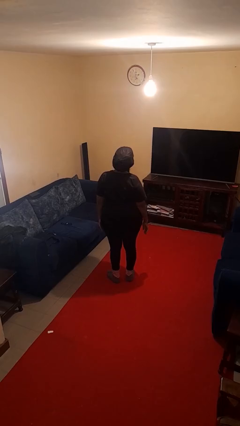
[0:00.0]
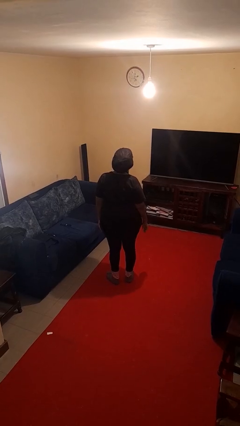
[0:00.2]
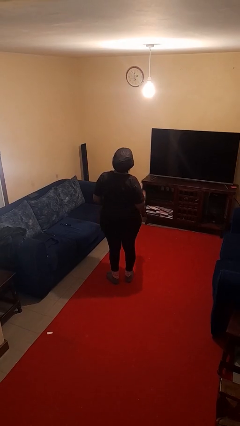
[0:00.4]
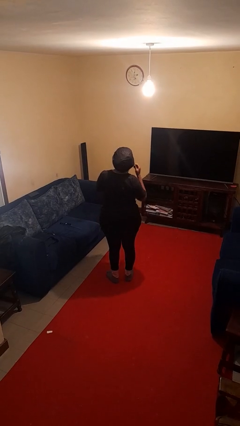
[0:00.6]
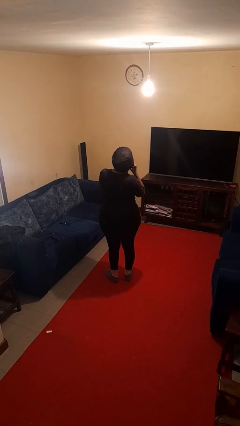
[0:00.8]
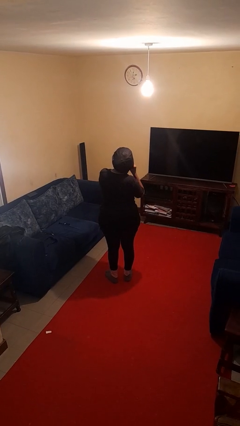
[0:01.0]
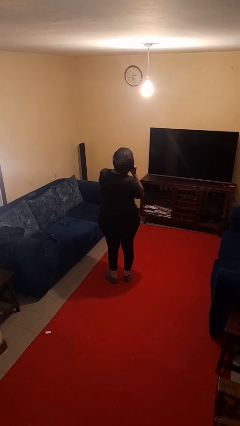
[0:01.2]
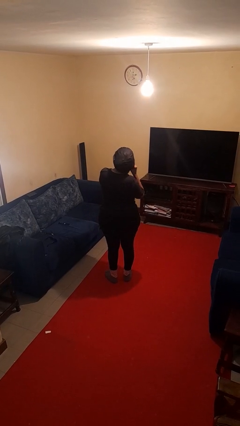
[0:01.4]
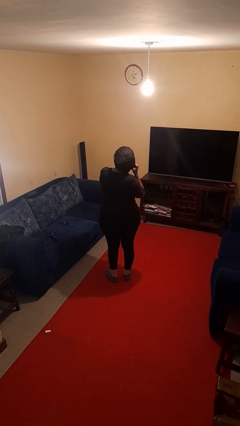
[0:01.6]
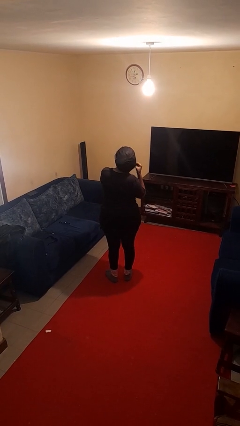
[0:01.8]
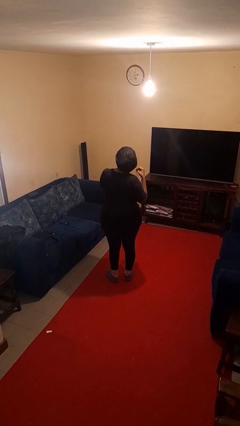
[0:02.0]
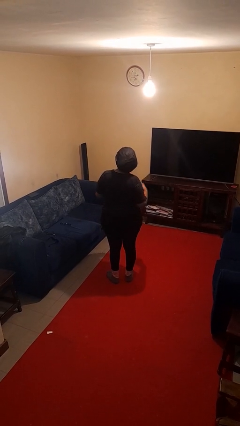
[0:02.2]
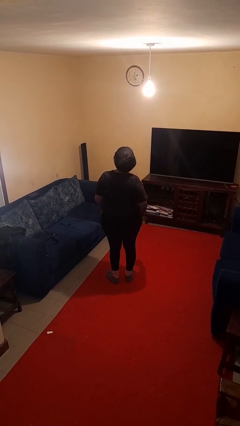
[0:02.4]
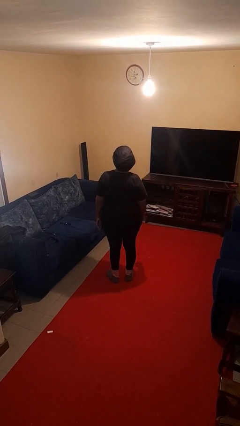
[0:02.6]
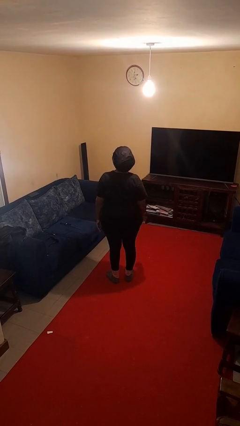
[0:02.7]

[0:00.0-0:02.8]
person takes off earrings

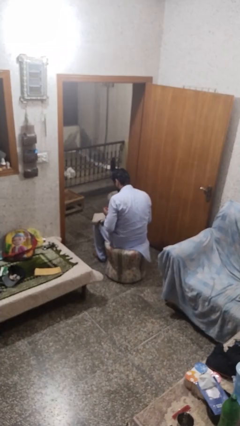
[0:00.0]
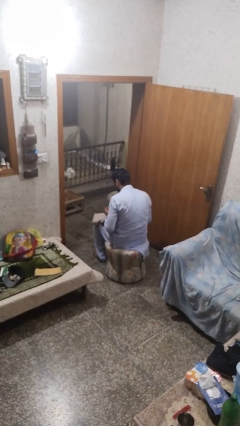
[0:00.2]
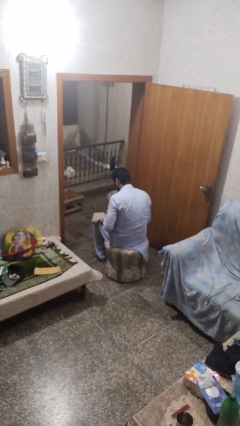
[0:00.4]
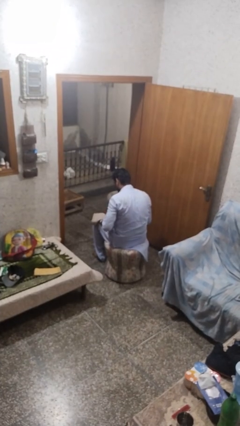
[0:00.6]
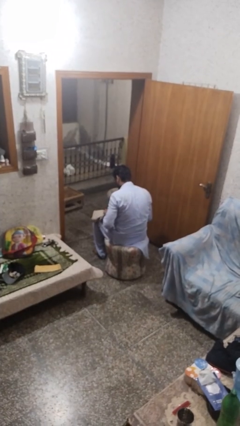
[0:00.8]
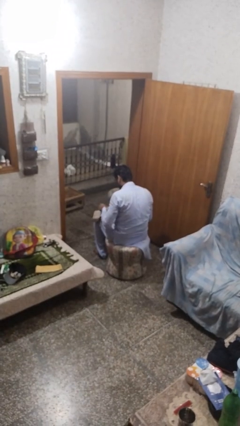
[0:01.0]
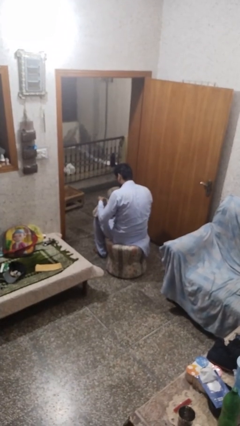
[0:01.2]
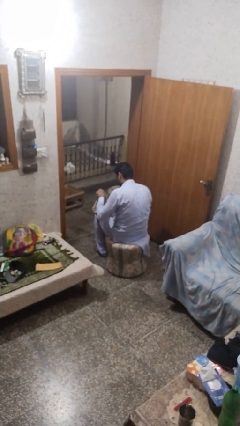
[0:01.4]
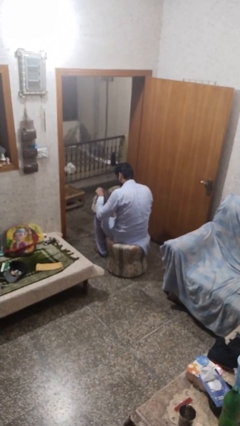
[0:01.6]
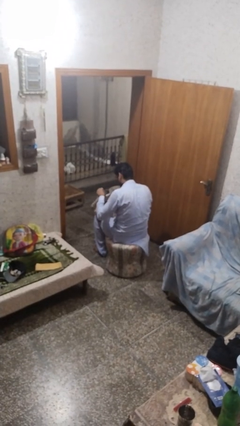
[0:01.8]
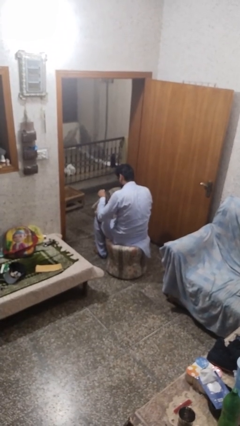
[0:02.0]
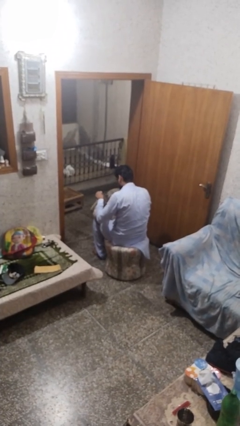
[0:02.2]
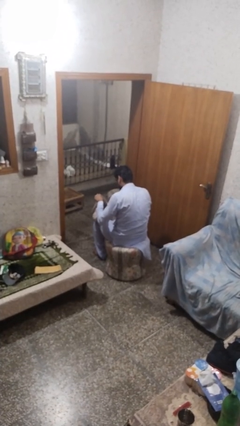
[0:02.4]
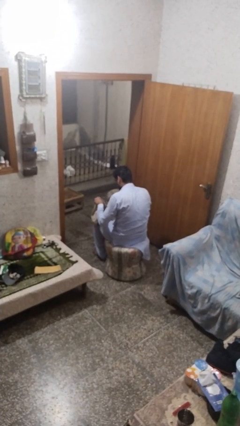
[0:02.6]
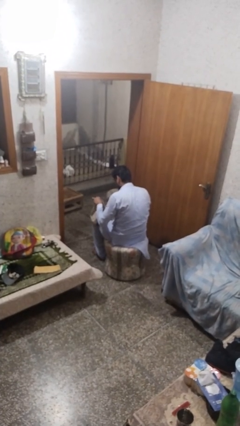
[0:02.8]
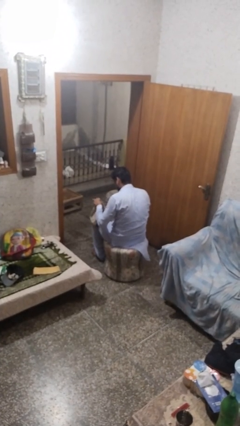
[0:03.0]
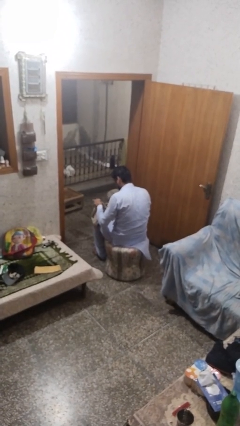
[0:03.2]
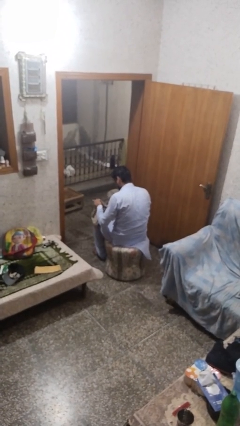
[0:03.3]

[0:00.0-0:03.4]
person puts object into purse

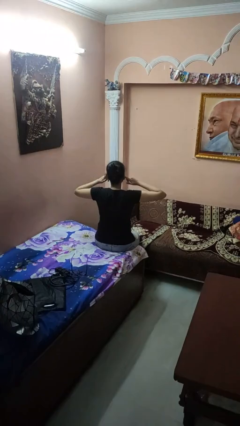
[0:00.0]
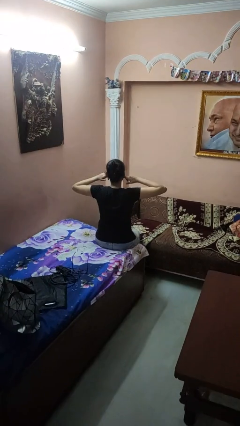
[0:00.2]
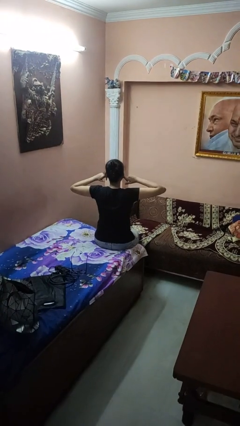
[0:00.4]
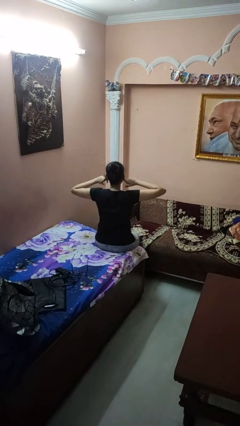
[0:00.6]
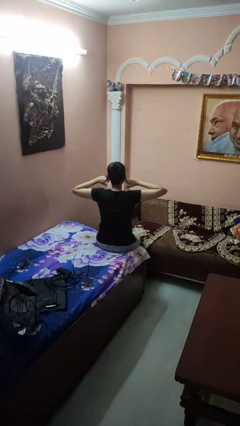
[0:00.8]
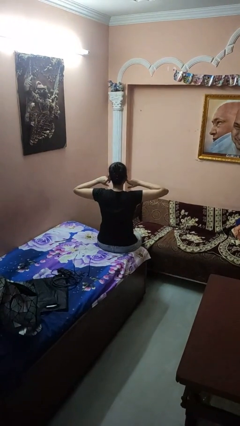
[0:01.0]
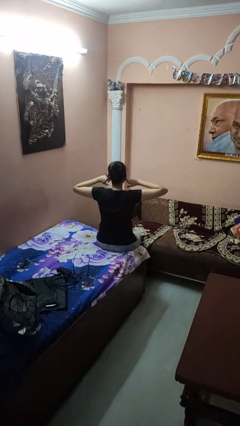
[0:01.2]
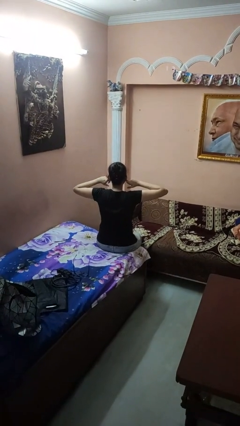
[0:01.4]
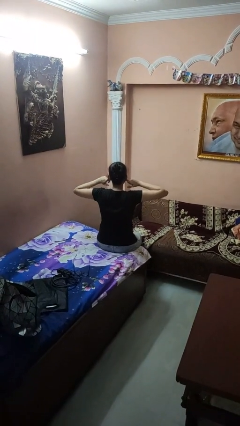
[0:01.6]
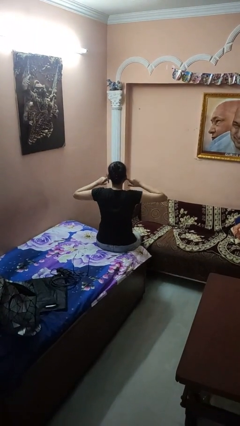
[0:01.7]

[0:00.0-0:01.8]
person puts fingers in ear

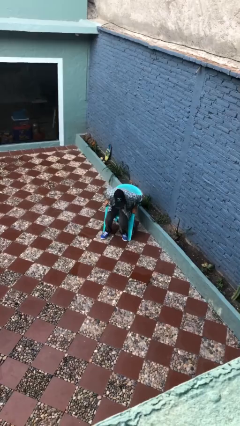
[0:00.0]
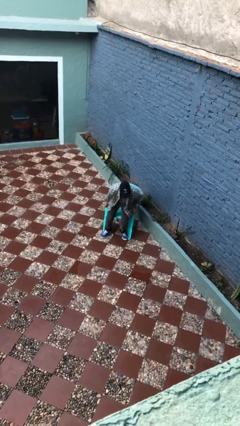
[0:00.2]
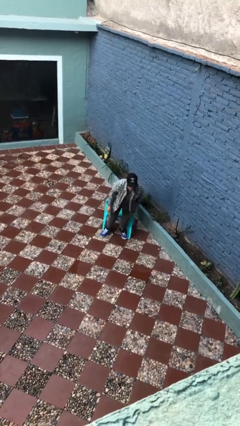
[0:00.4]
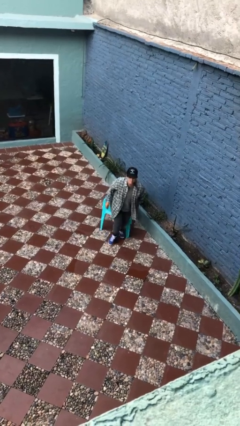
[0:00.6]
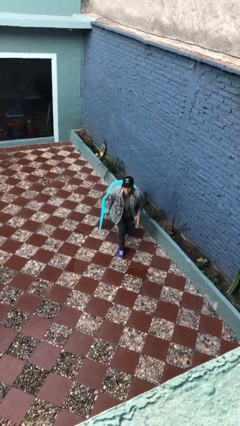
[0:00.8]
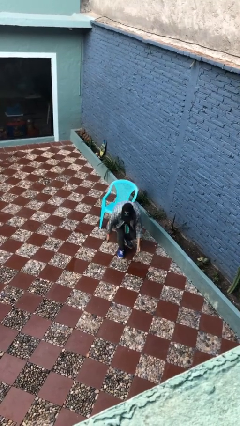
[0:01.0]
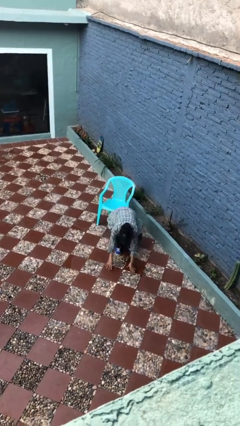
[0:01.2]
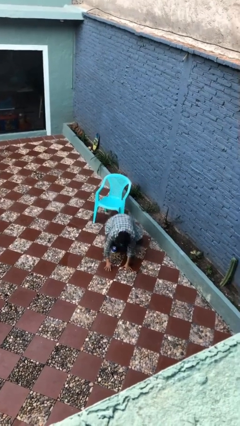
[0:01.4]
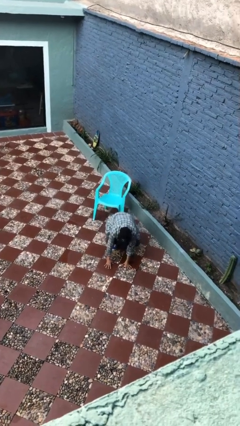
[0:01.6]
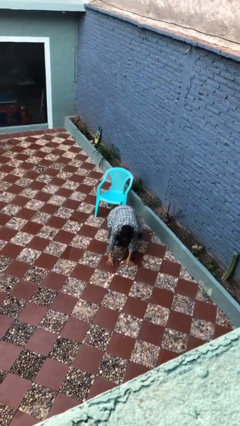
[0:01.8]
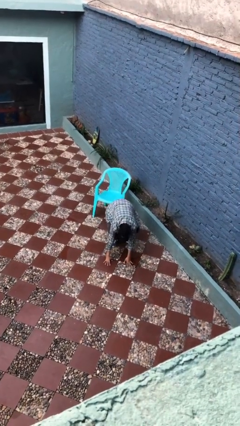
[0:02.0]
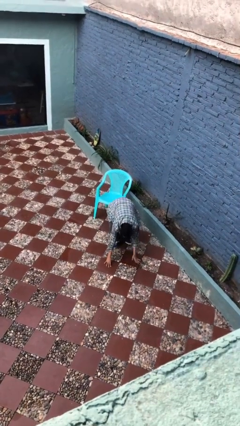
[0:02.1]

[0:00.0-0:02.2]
person falls from chair

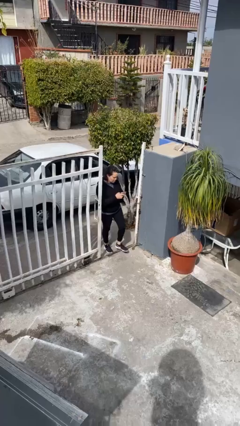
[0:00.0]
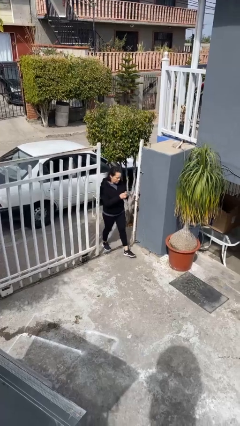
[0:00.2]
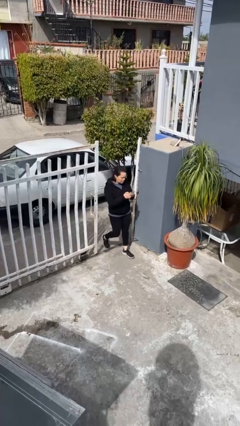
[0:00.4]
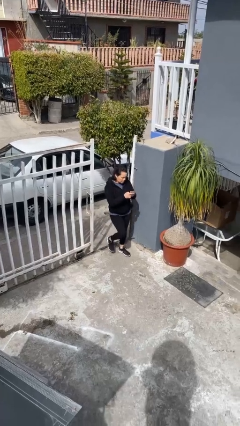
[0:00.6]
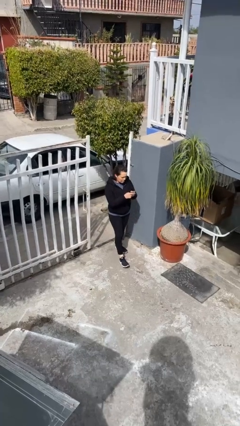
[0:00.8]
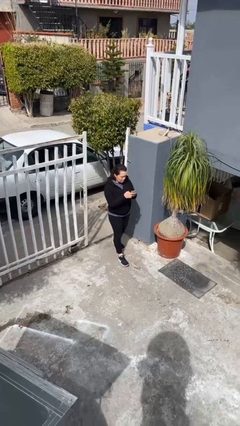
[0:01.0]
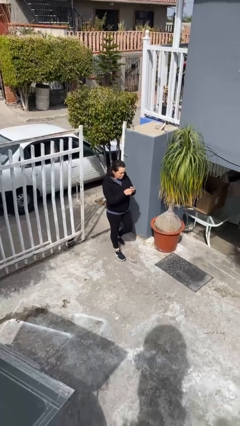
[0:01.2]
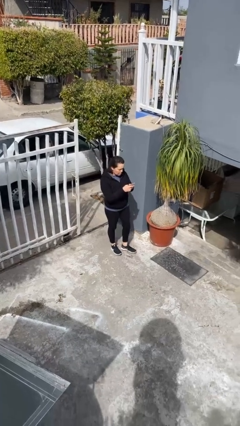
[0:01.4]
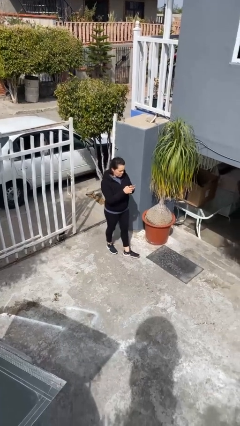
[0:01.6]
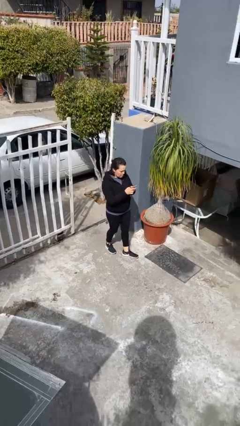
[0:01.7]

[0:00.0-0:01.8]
person enters scene through structure

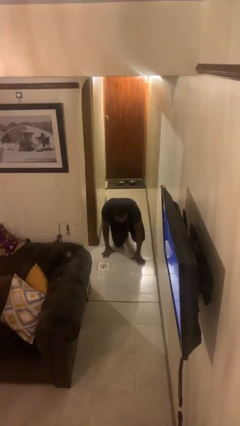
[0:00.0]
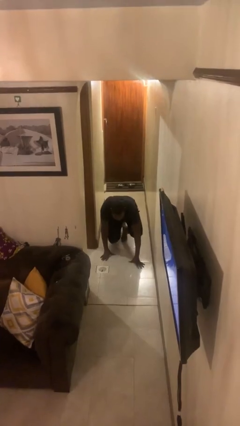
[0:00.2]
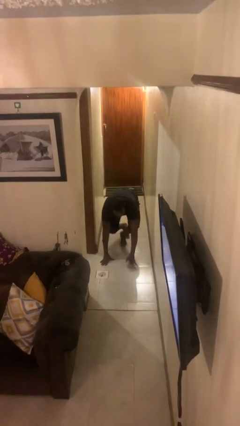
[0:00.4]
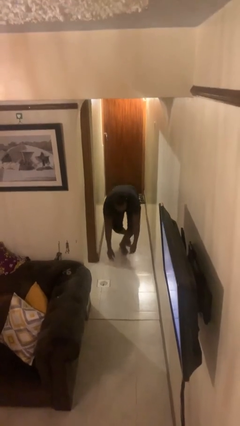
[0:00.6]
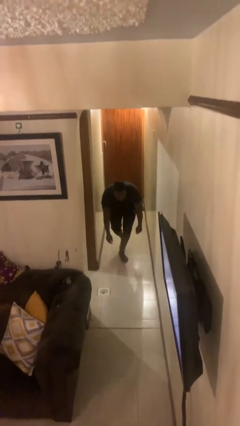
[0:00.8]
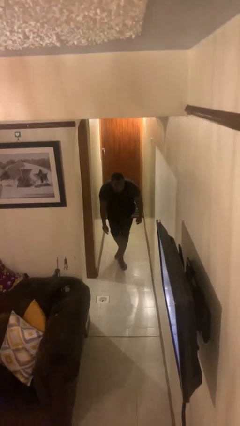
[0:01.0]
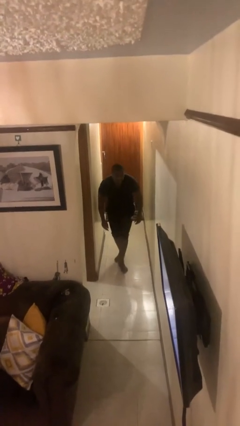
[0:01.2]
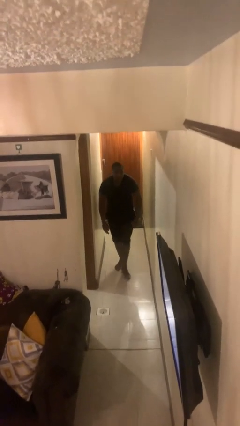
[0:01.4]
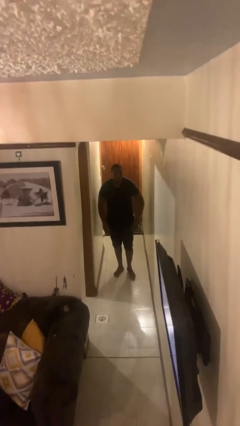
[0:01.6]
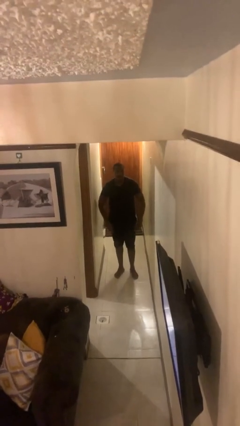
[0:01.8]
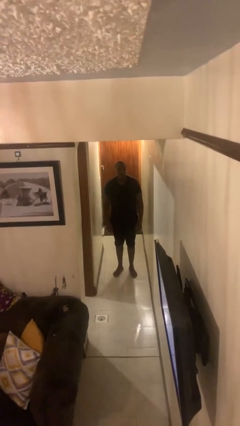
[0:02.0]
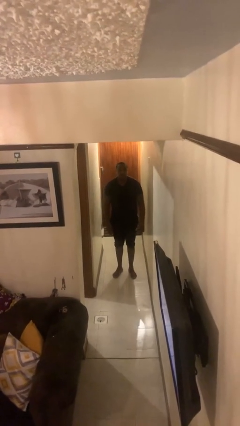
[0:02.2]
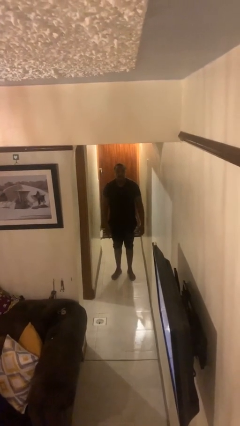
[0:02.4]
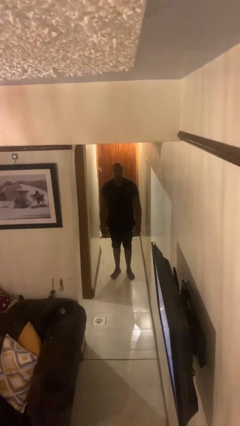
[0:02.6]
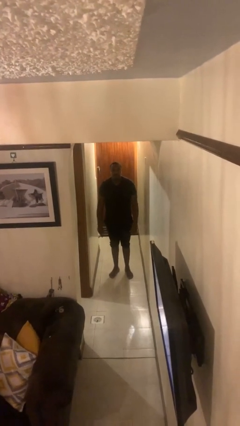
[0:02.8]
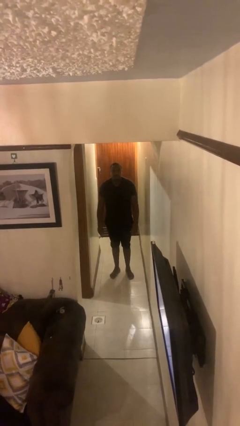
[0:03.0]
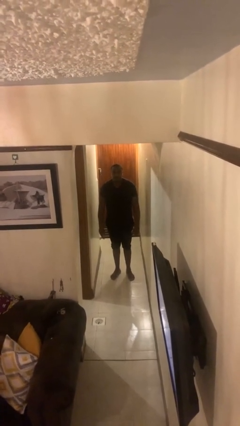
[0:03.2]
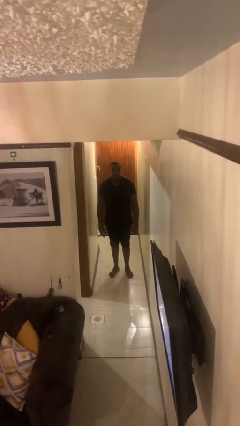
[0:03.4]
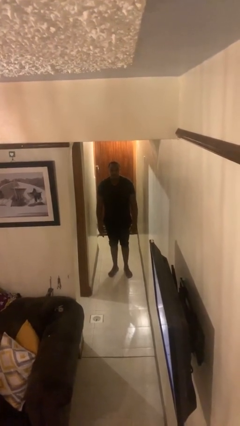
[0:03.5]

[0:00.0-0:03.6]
person stands up from floor

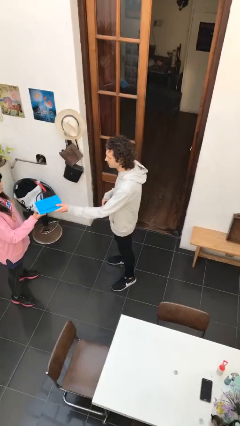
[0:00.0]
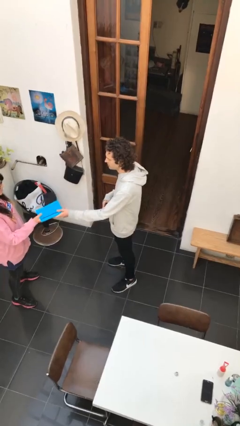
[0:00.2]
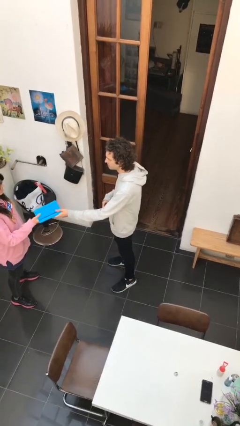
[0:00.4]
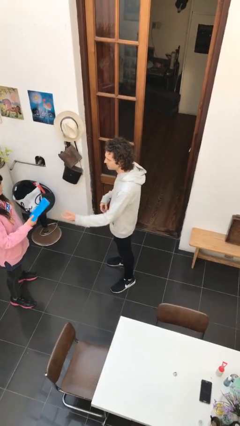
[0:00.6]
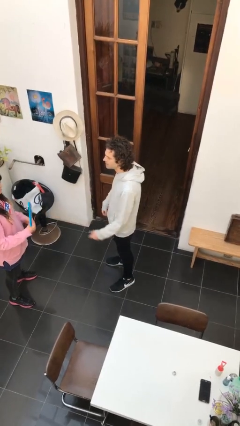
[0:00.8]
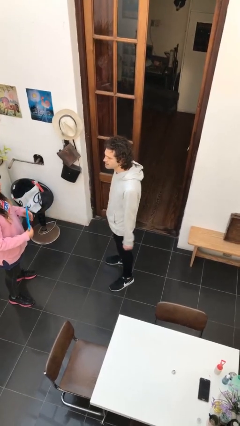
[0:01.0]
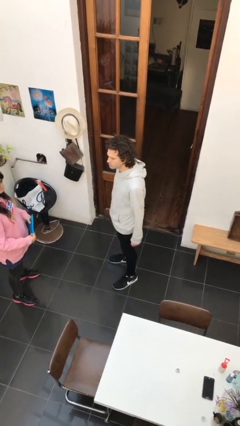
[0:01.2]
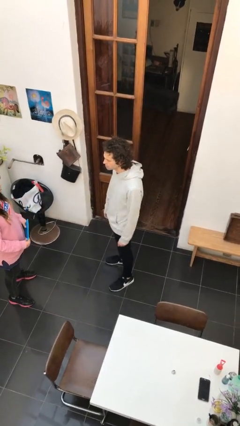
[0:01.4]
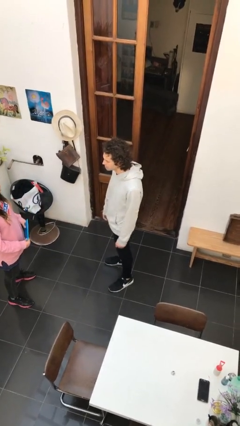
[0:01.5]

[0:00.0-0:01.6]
person transfers object to person
